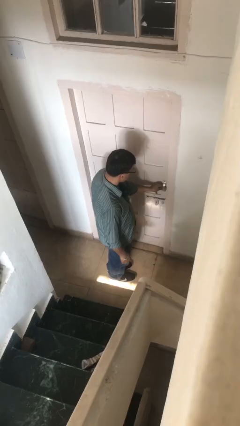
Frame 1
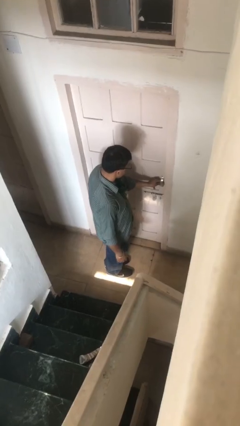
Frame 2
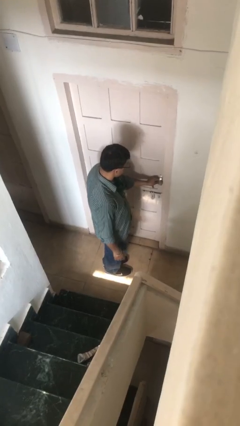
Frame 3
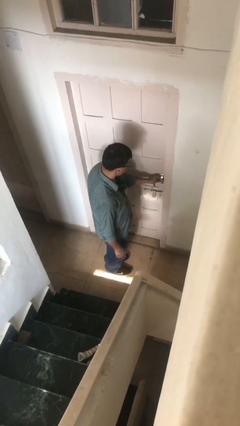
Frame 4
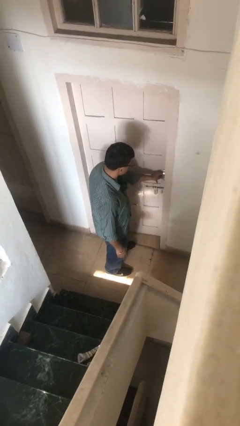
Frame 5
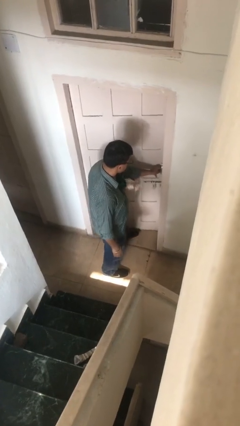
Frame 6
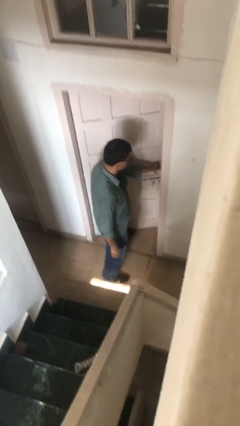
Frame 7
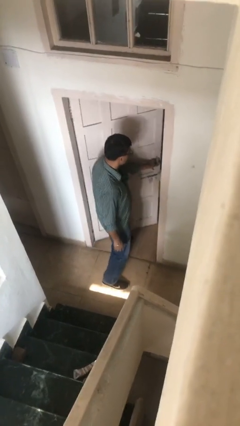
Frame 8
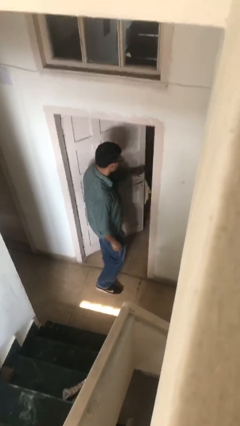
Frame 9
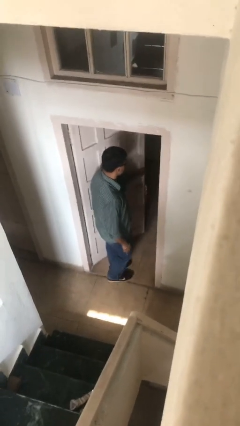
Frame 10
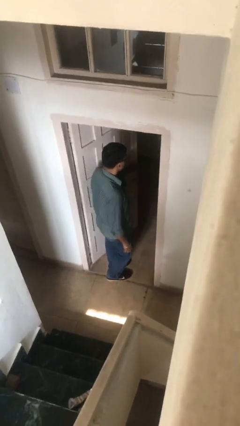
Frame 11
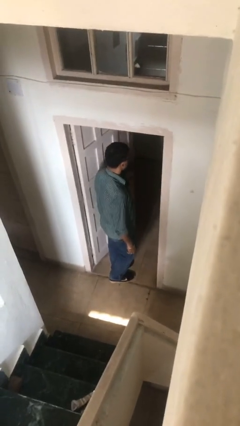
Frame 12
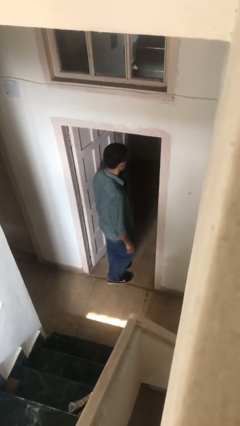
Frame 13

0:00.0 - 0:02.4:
person opens facility door

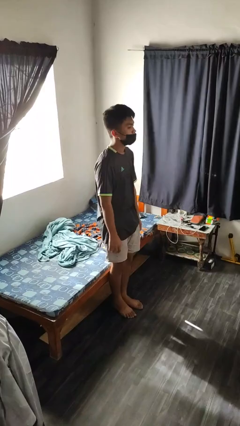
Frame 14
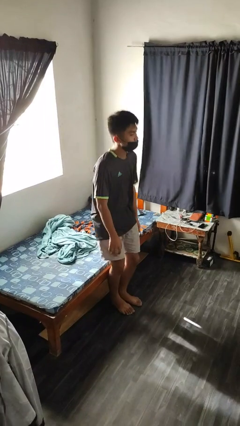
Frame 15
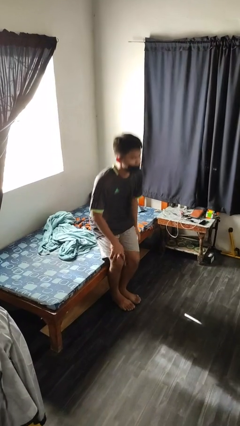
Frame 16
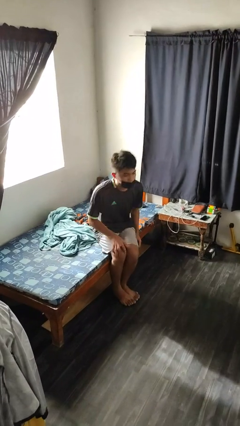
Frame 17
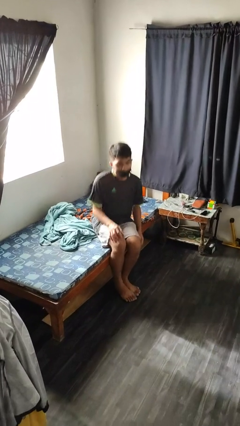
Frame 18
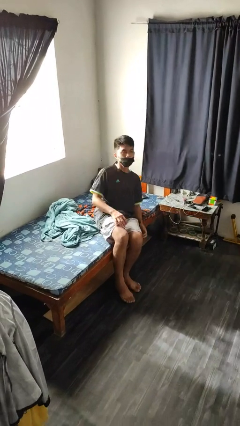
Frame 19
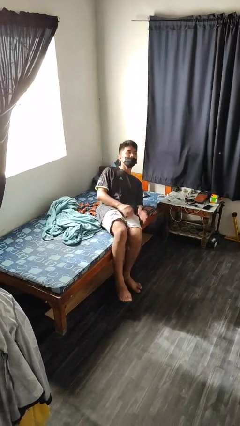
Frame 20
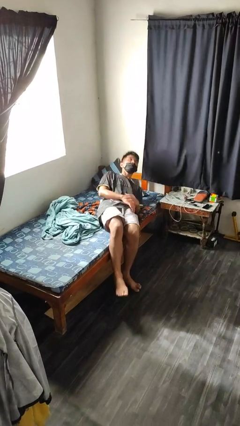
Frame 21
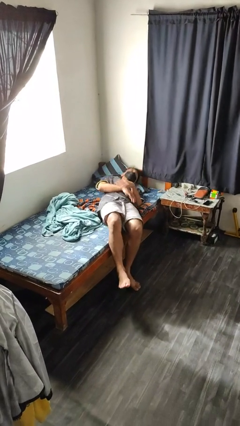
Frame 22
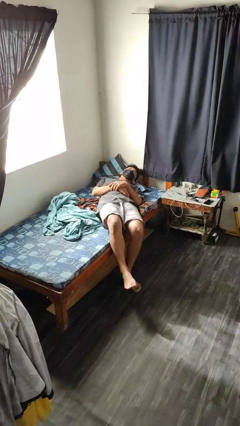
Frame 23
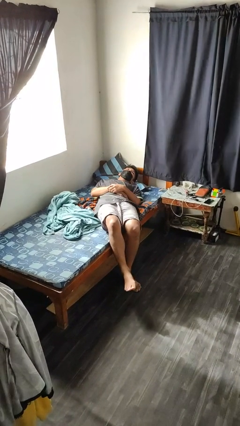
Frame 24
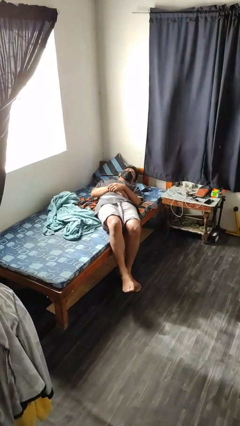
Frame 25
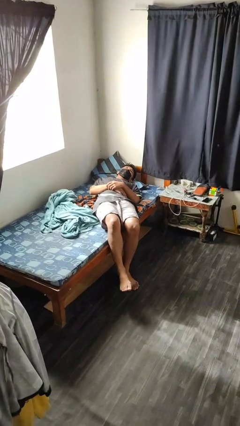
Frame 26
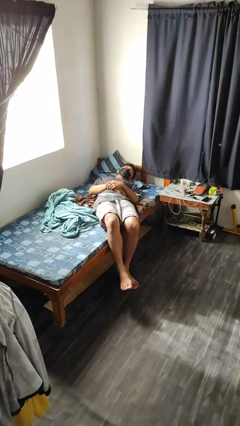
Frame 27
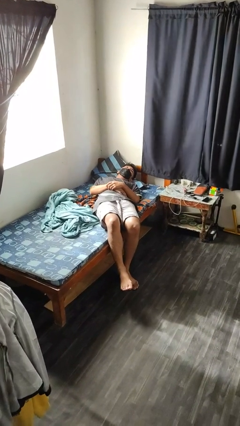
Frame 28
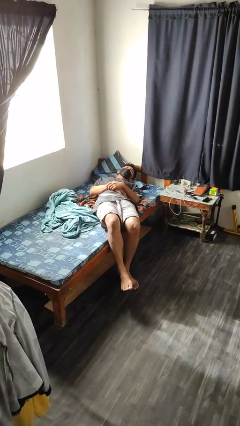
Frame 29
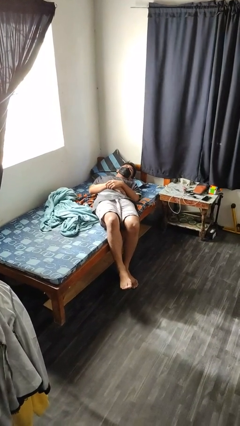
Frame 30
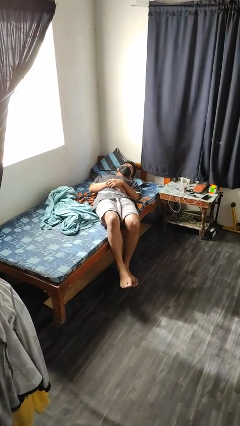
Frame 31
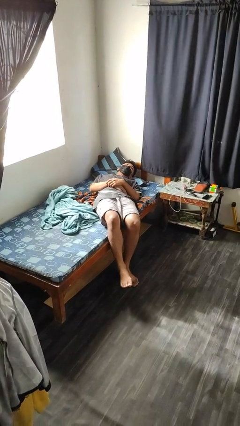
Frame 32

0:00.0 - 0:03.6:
person lies down on bed

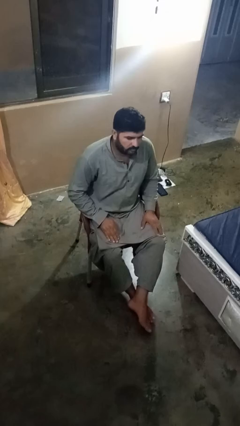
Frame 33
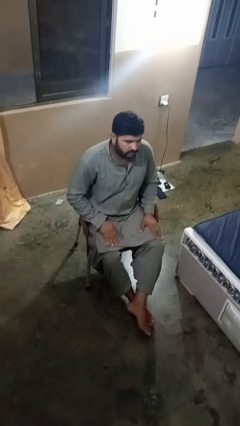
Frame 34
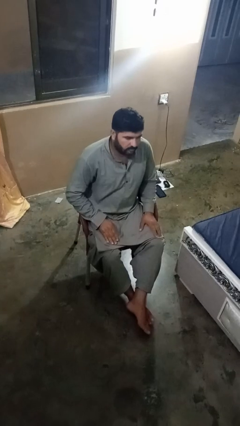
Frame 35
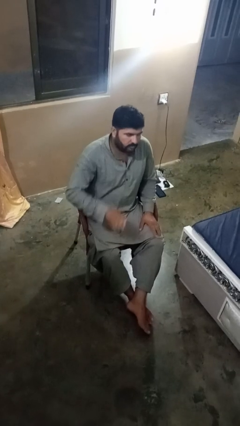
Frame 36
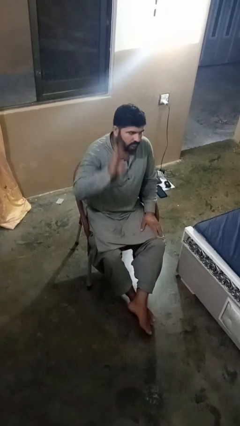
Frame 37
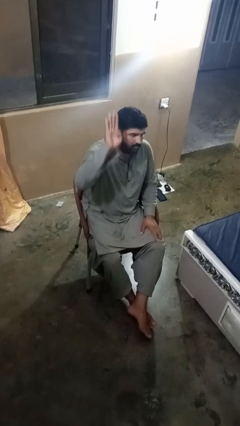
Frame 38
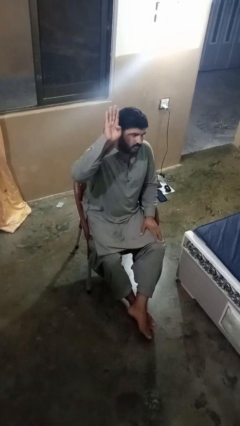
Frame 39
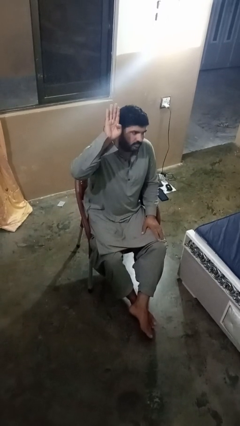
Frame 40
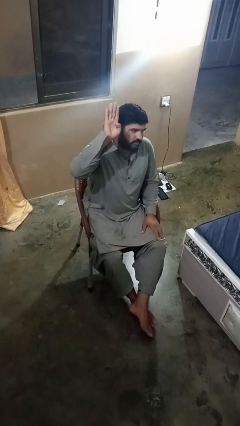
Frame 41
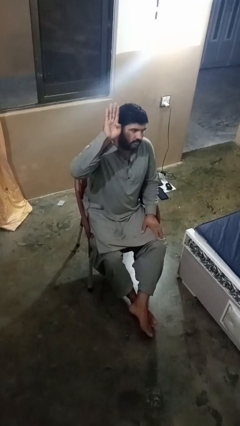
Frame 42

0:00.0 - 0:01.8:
person gestures number four

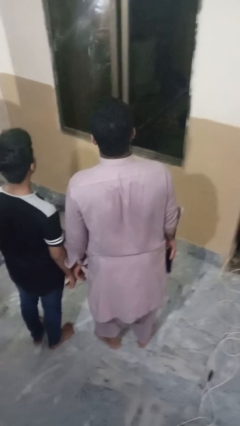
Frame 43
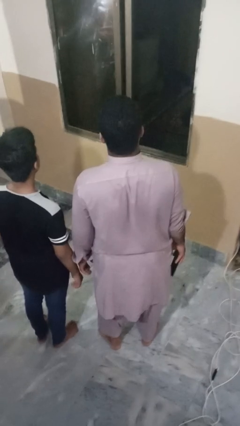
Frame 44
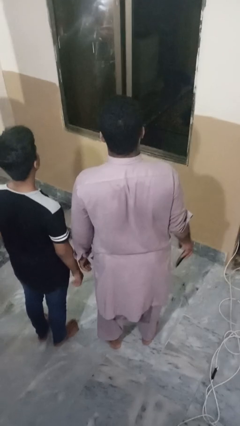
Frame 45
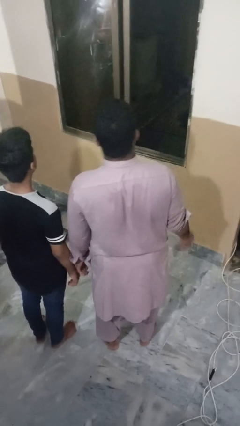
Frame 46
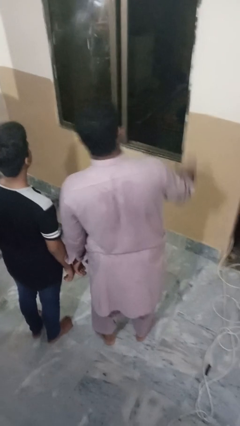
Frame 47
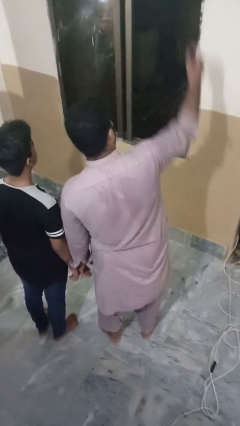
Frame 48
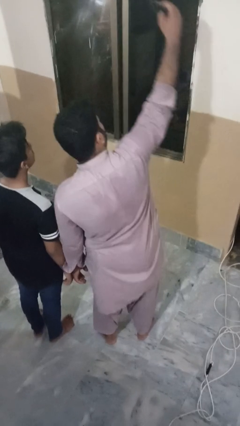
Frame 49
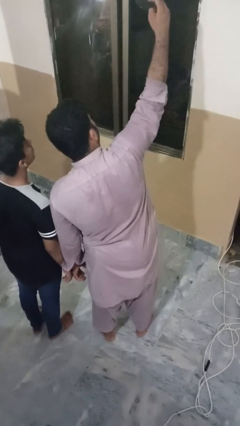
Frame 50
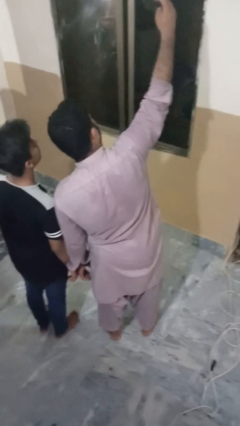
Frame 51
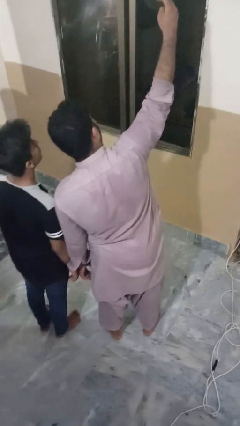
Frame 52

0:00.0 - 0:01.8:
person takes selfie with person

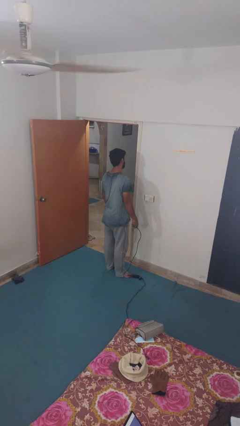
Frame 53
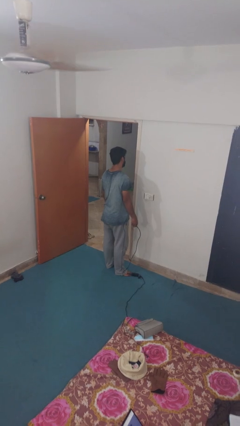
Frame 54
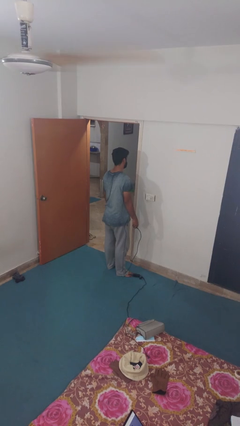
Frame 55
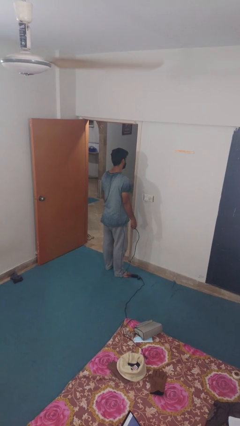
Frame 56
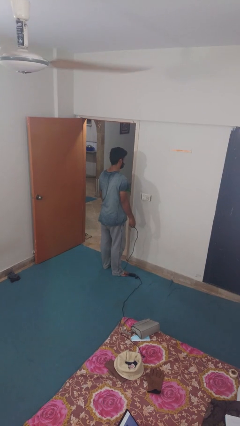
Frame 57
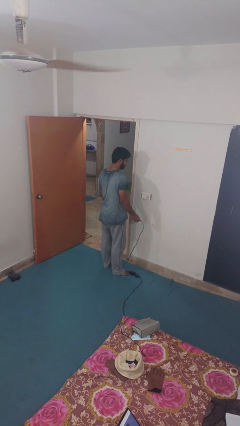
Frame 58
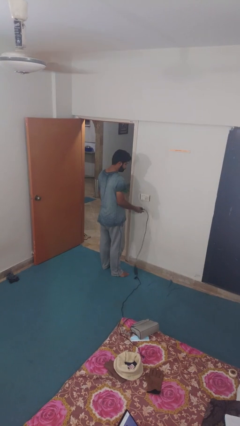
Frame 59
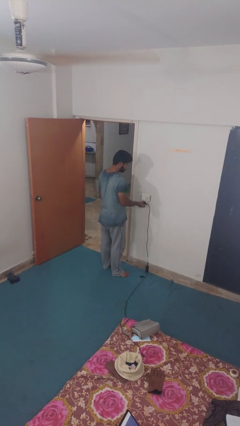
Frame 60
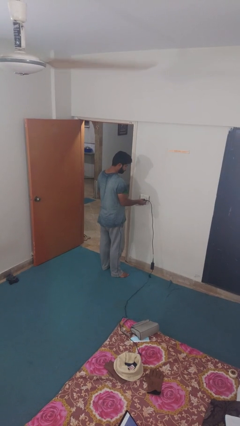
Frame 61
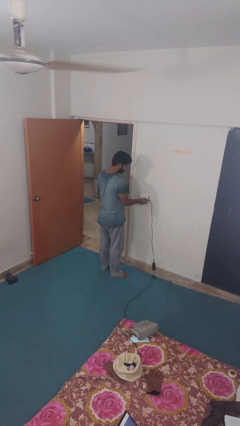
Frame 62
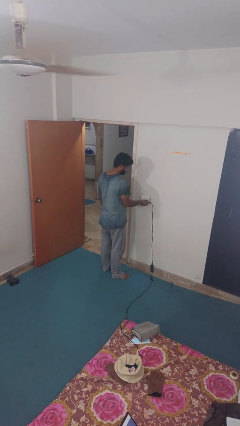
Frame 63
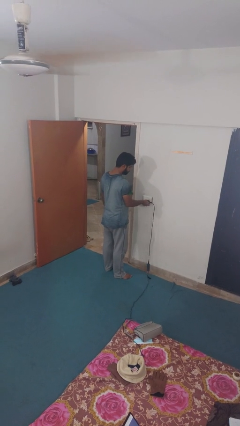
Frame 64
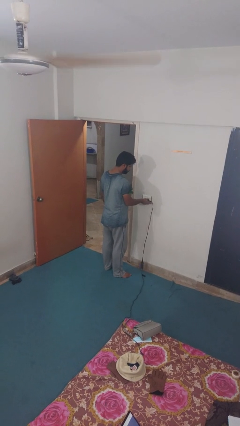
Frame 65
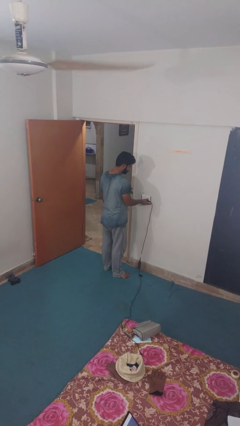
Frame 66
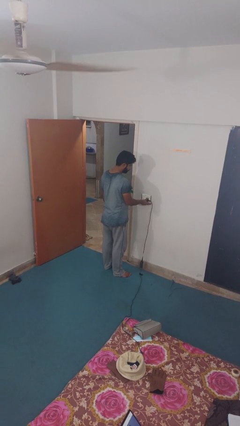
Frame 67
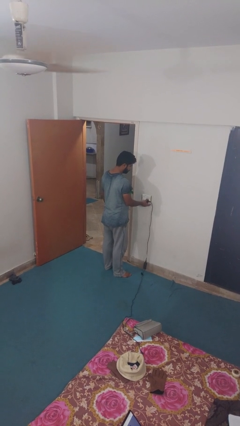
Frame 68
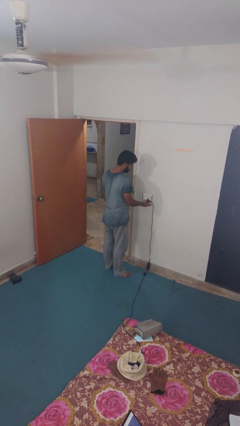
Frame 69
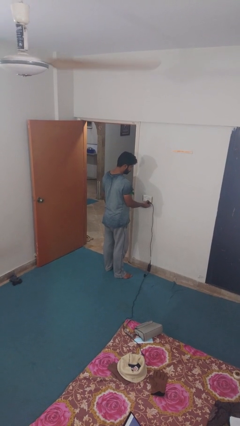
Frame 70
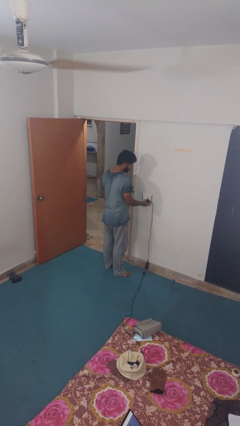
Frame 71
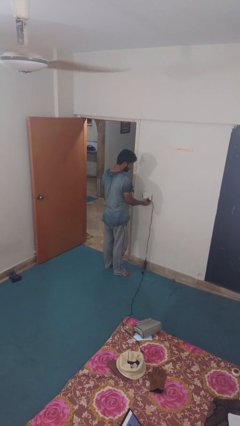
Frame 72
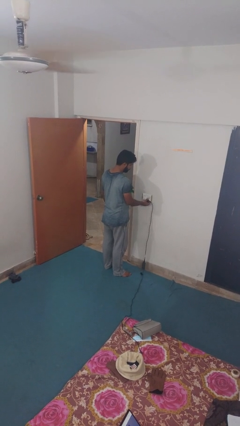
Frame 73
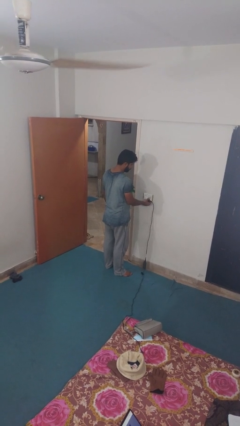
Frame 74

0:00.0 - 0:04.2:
person plugs into electrical socket

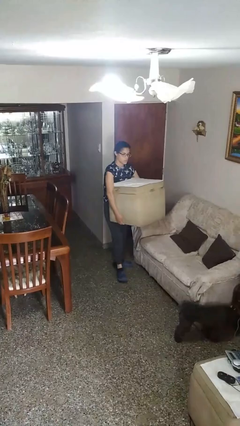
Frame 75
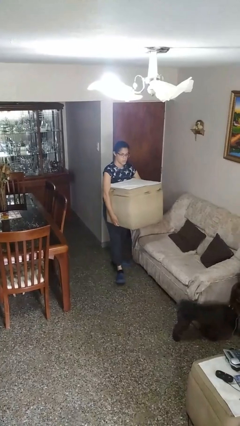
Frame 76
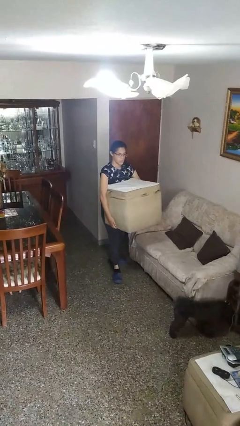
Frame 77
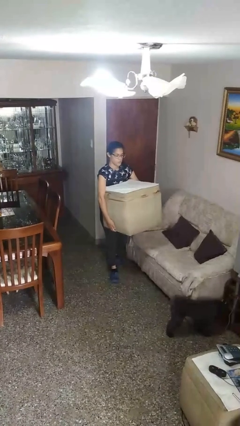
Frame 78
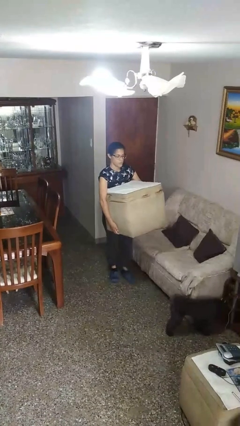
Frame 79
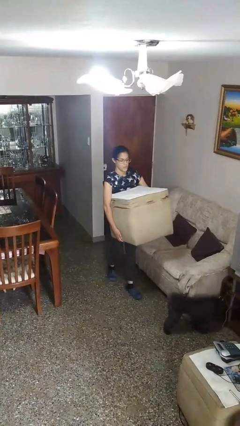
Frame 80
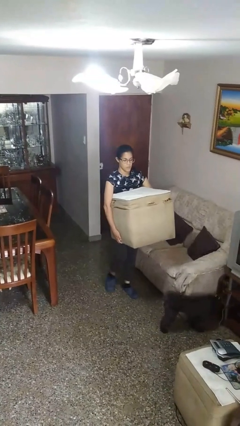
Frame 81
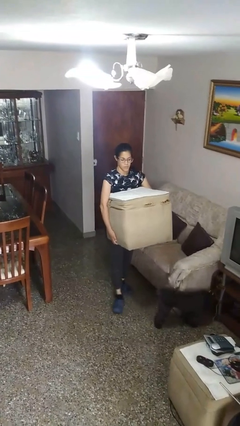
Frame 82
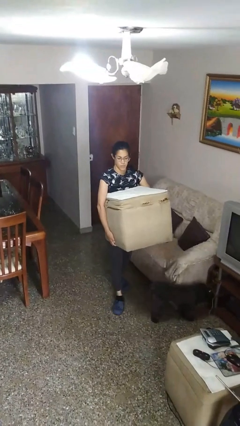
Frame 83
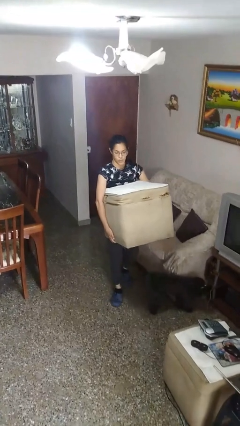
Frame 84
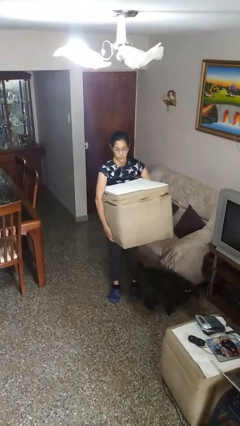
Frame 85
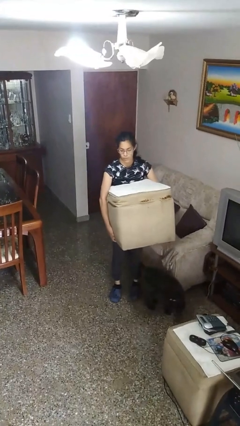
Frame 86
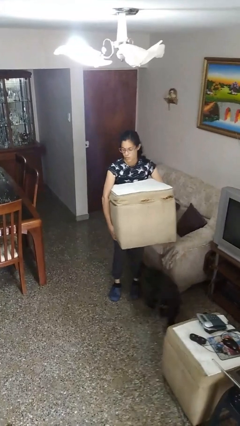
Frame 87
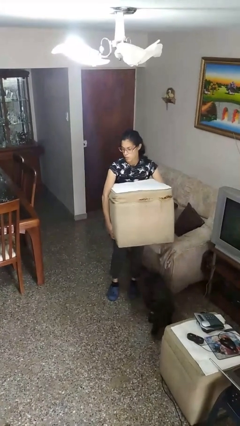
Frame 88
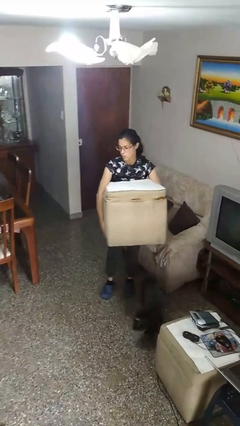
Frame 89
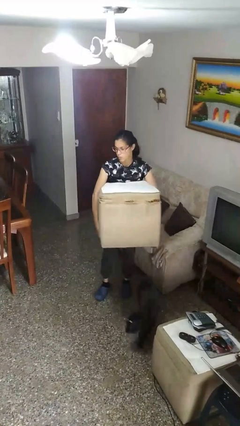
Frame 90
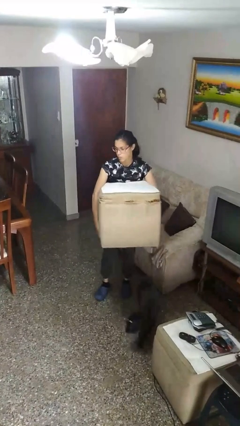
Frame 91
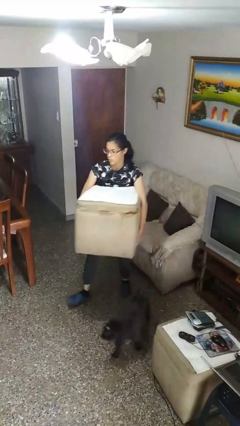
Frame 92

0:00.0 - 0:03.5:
person carries furniture

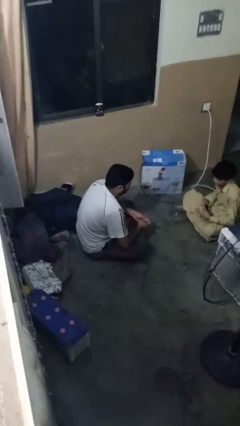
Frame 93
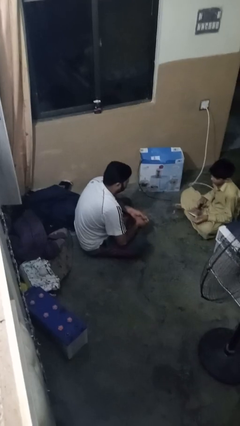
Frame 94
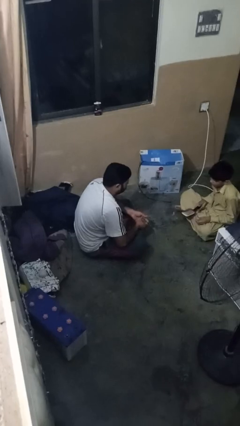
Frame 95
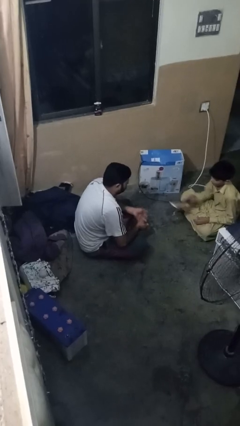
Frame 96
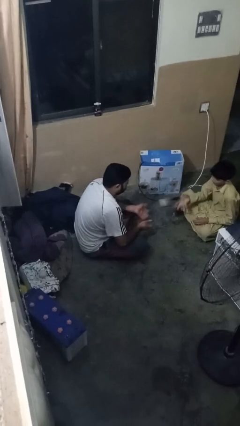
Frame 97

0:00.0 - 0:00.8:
person catches object from person
